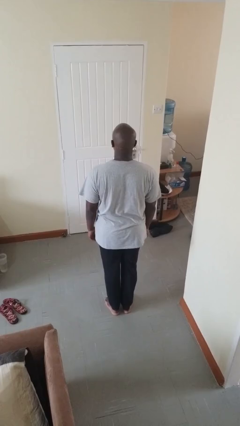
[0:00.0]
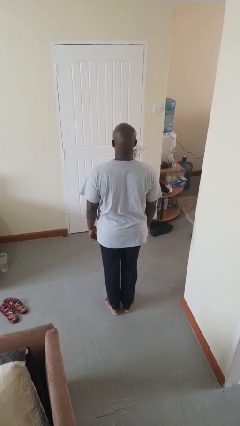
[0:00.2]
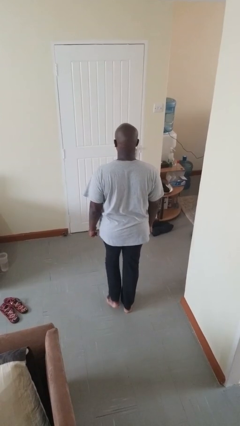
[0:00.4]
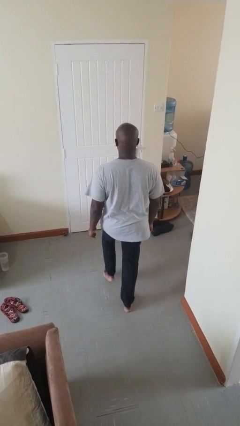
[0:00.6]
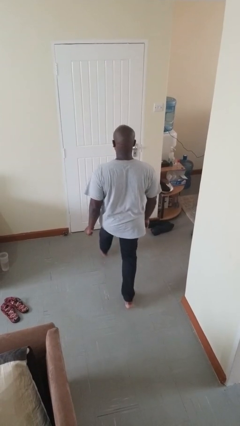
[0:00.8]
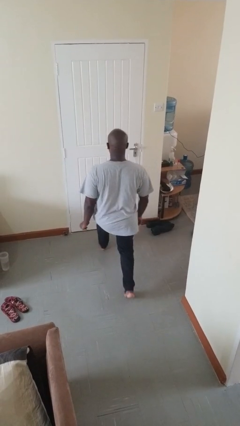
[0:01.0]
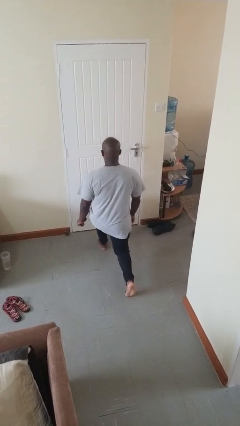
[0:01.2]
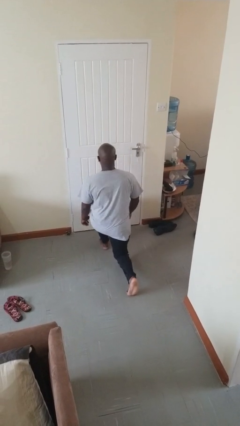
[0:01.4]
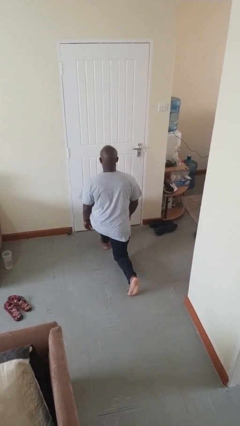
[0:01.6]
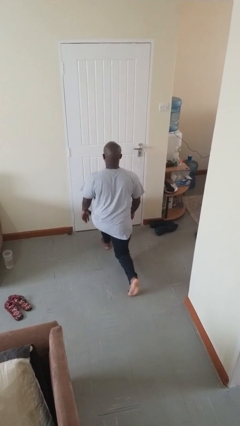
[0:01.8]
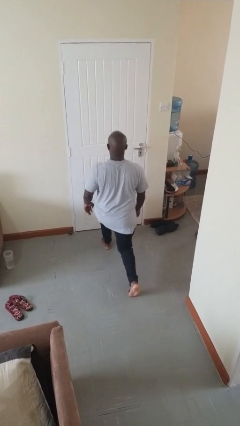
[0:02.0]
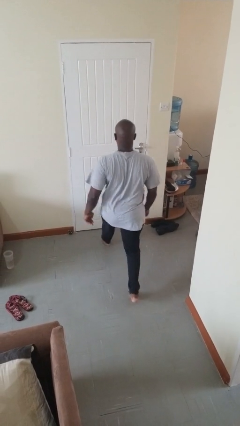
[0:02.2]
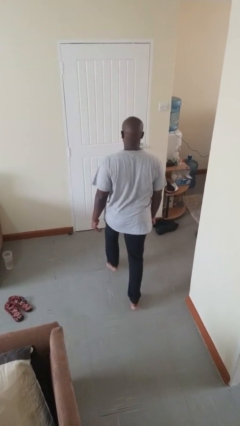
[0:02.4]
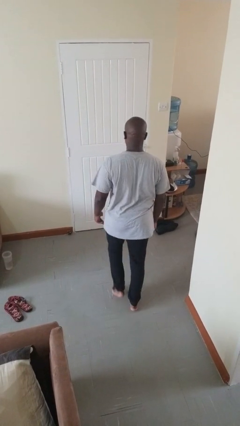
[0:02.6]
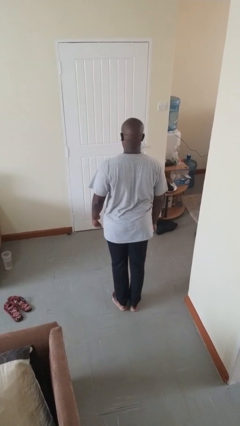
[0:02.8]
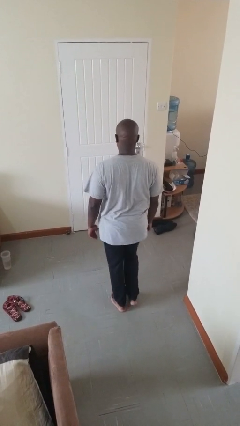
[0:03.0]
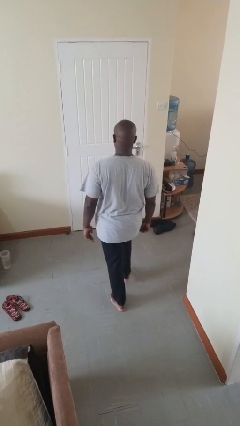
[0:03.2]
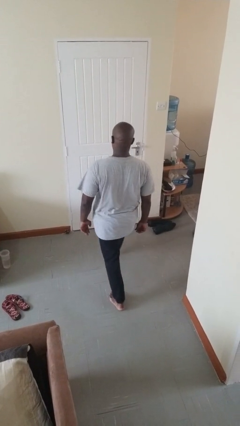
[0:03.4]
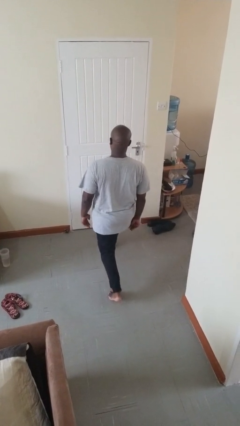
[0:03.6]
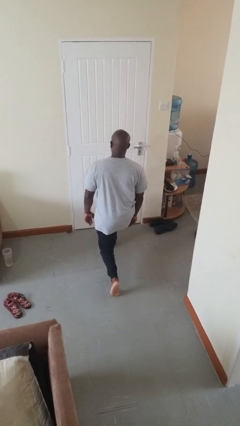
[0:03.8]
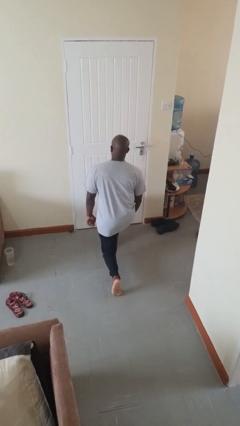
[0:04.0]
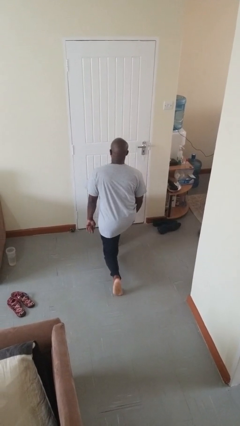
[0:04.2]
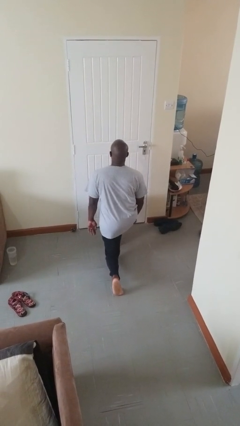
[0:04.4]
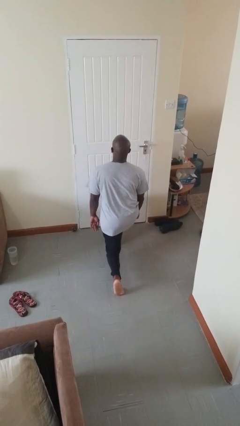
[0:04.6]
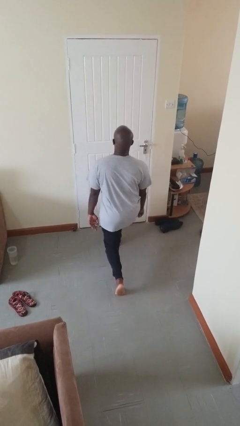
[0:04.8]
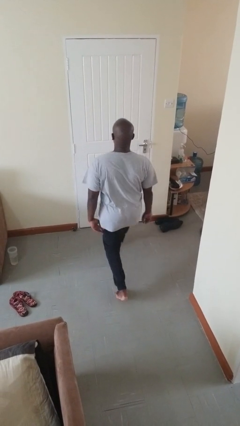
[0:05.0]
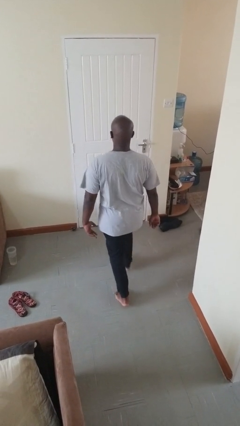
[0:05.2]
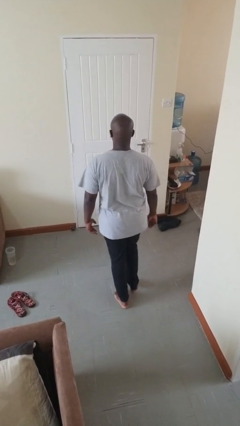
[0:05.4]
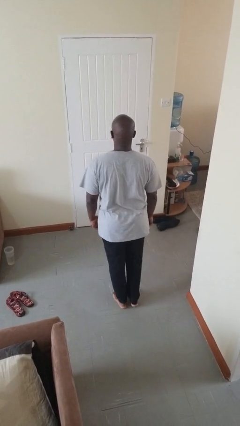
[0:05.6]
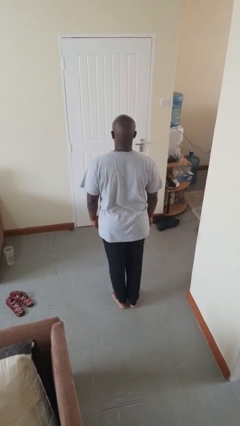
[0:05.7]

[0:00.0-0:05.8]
person exercises with lunges

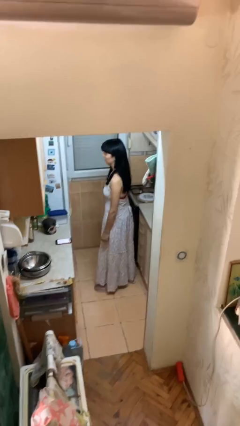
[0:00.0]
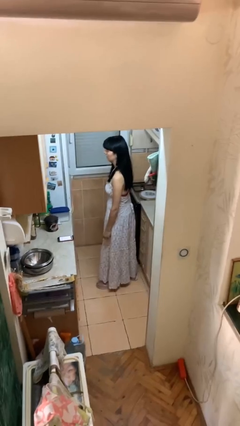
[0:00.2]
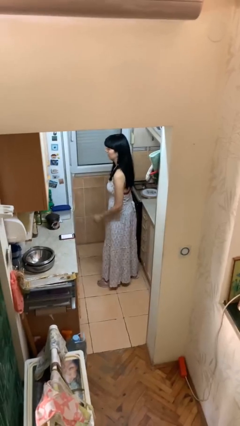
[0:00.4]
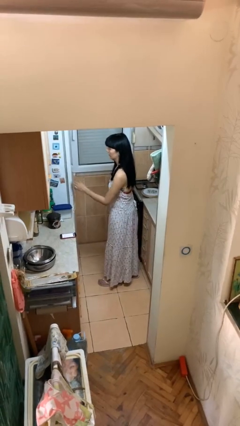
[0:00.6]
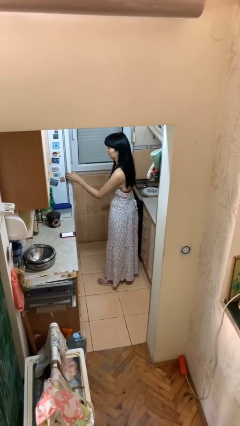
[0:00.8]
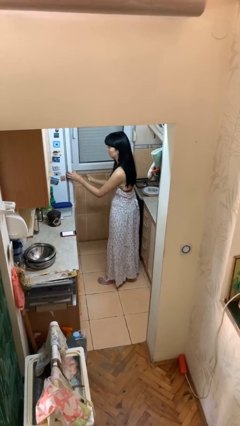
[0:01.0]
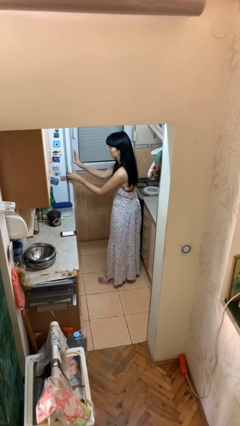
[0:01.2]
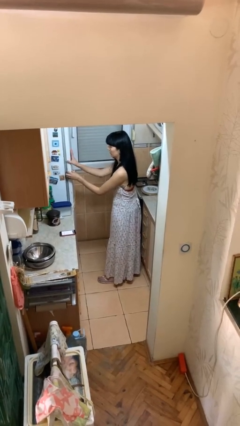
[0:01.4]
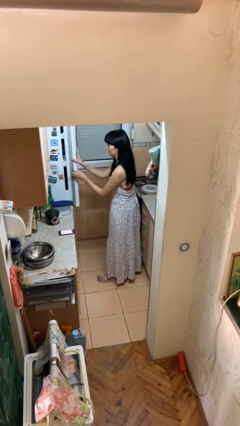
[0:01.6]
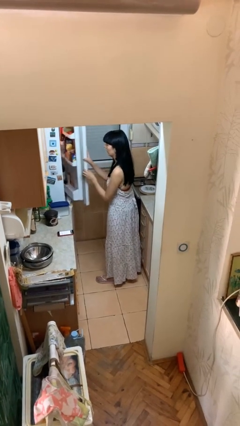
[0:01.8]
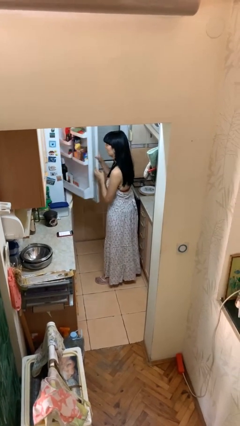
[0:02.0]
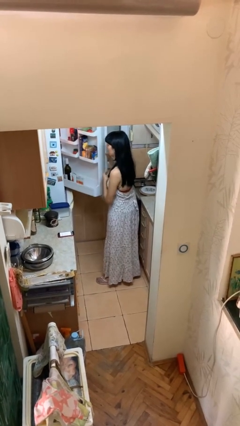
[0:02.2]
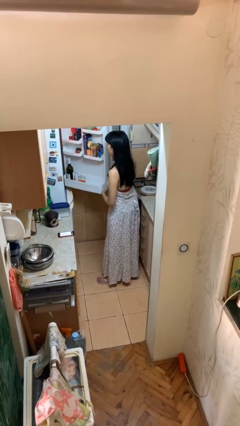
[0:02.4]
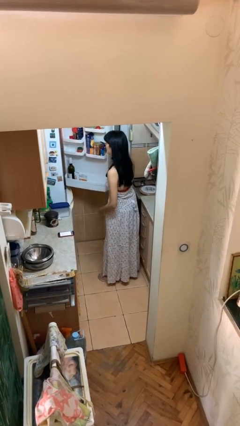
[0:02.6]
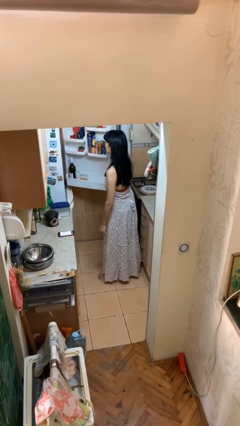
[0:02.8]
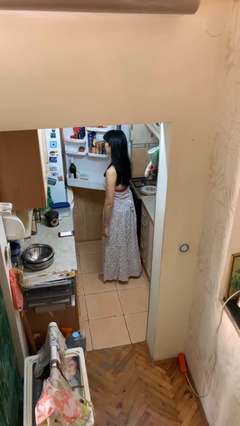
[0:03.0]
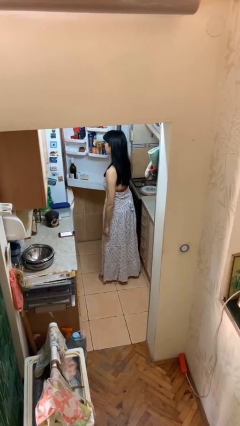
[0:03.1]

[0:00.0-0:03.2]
person opens refrigerator

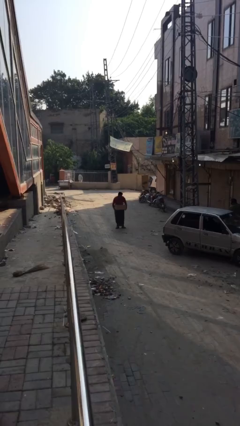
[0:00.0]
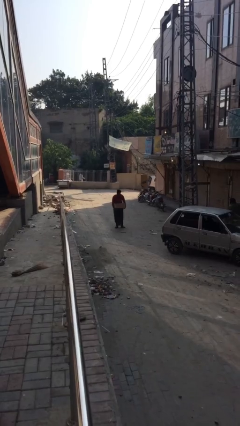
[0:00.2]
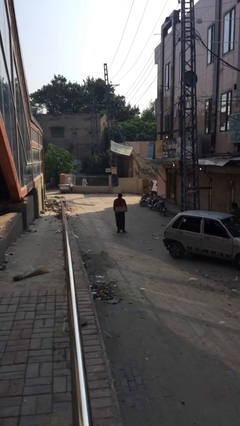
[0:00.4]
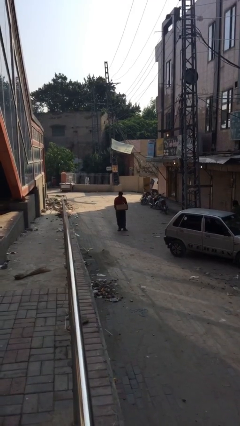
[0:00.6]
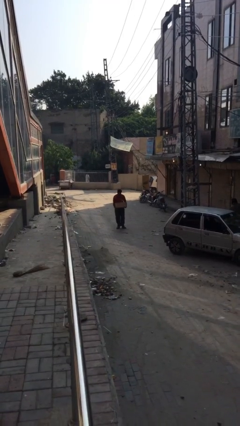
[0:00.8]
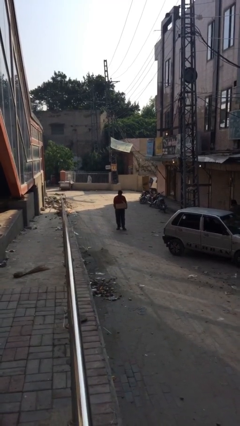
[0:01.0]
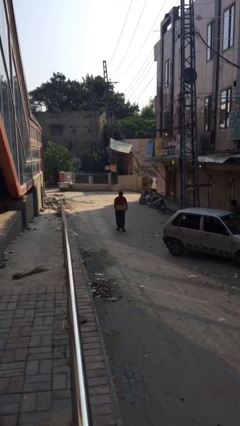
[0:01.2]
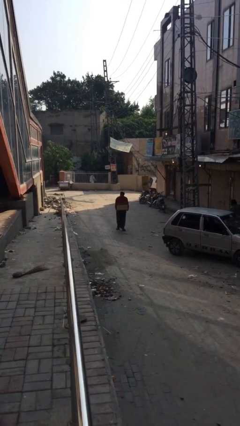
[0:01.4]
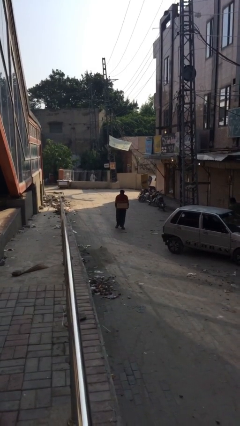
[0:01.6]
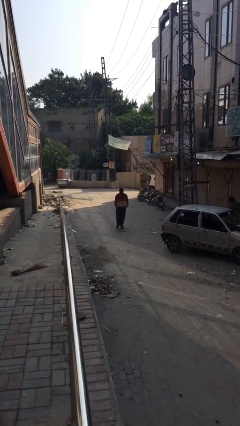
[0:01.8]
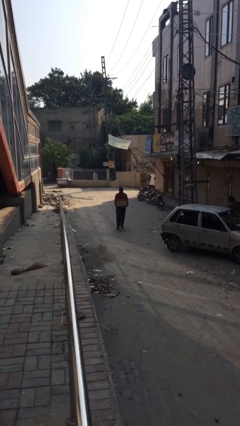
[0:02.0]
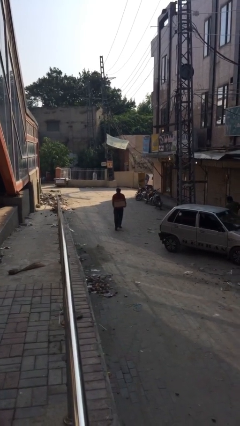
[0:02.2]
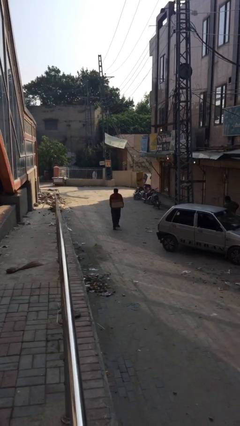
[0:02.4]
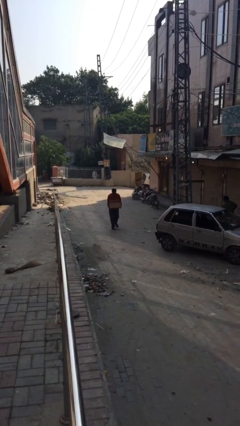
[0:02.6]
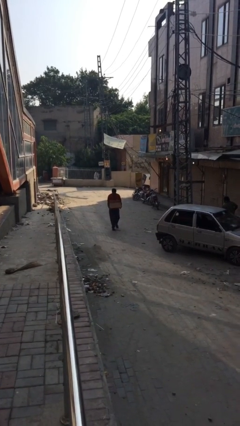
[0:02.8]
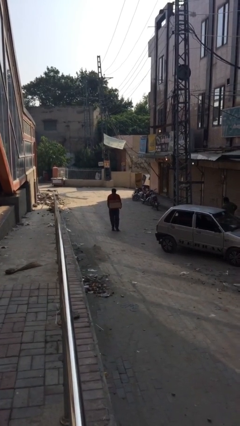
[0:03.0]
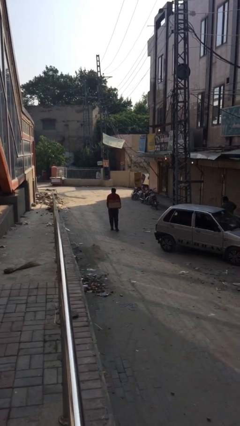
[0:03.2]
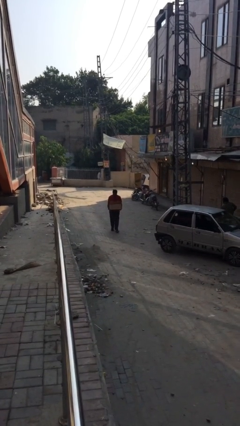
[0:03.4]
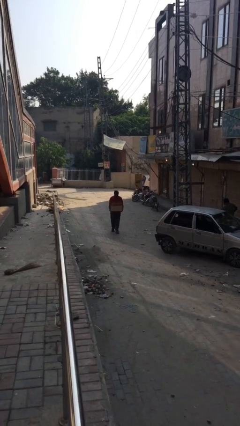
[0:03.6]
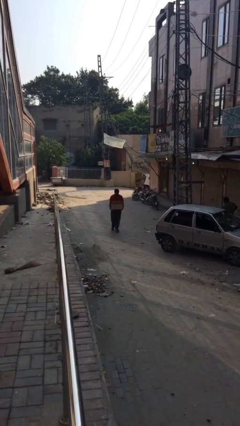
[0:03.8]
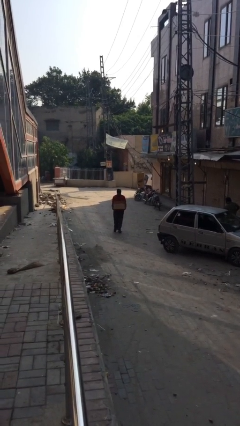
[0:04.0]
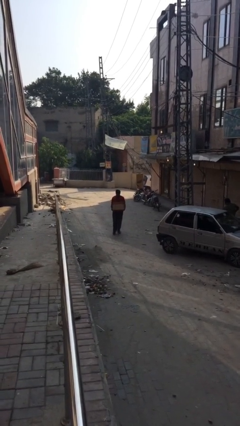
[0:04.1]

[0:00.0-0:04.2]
person carries heavy object

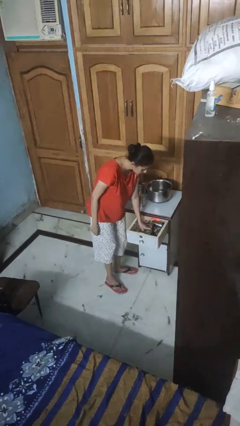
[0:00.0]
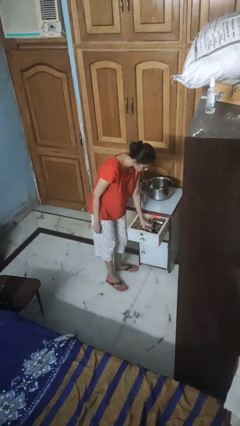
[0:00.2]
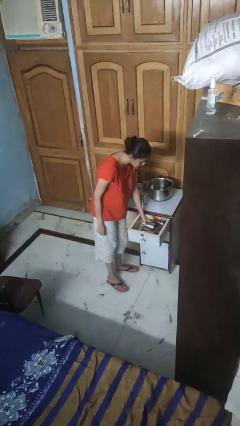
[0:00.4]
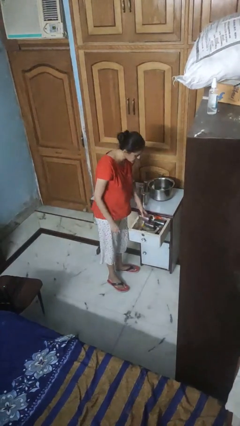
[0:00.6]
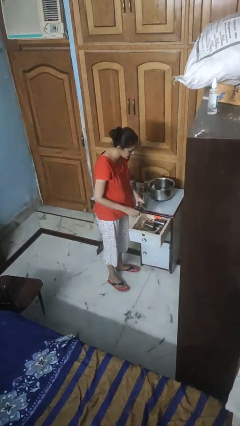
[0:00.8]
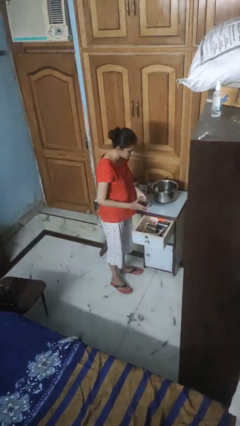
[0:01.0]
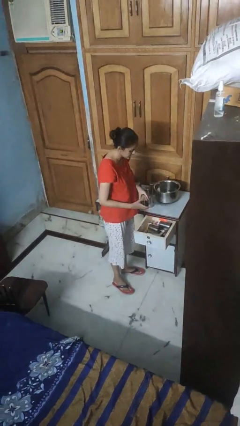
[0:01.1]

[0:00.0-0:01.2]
person takes object from kitchen drawer

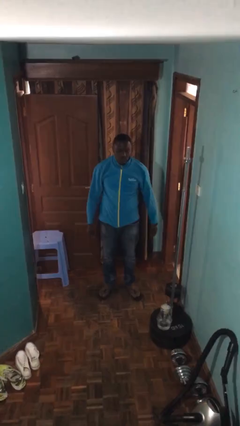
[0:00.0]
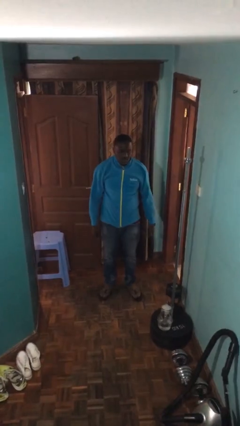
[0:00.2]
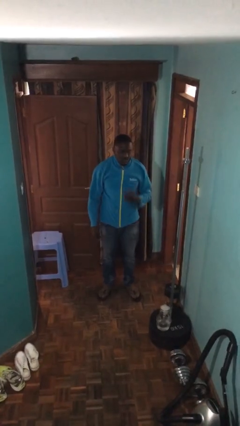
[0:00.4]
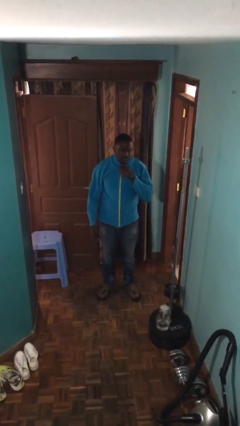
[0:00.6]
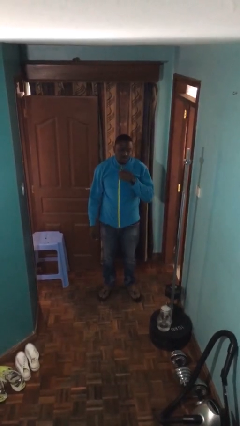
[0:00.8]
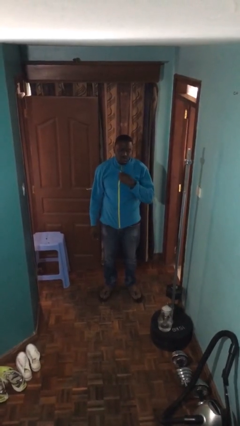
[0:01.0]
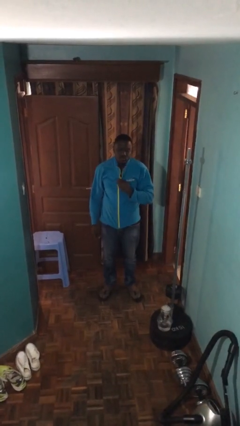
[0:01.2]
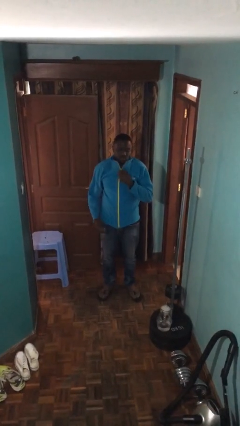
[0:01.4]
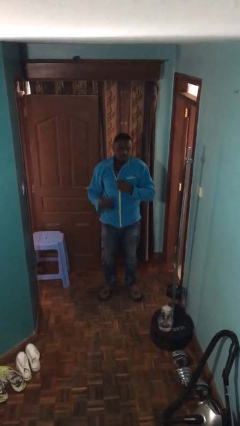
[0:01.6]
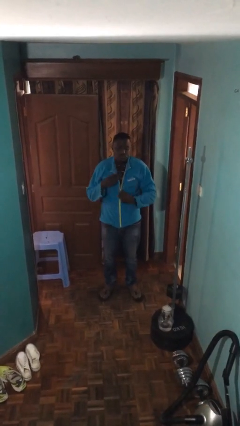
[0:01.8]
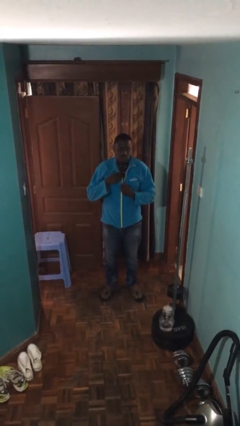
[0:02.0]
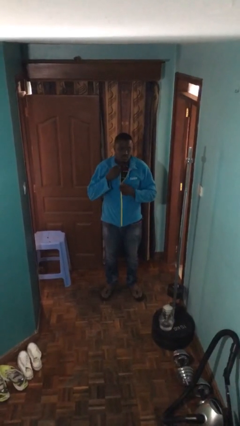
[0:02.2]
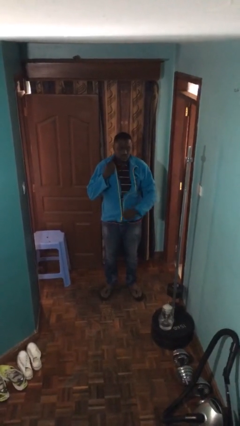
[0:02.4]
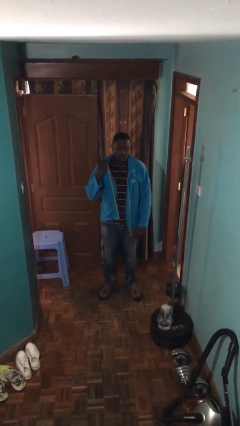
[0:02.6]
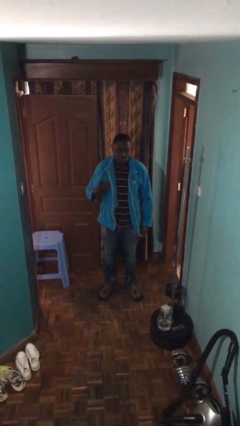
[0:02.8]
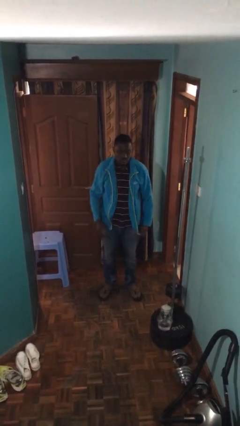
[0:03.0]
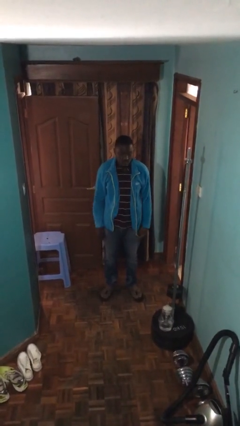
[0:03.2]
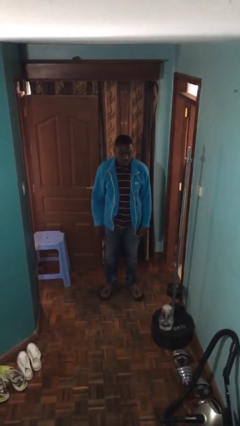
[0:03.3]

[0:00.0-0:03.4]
person unzips jacket
